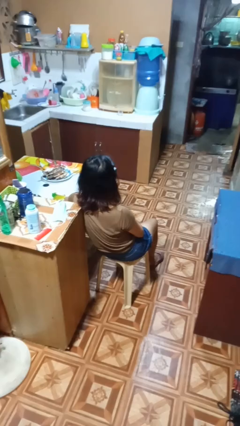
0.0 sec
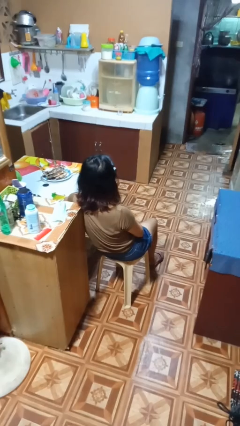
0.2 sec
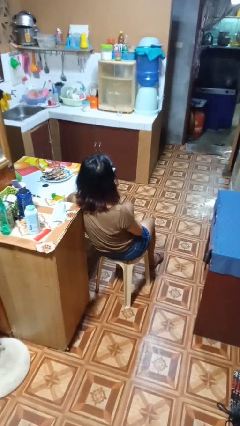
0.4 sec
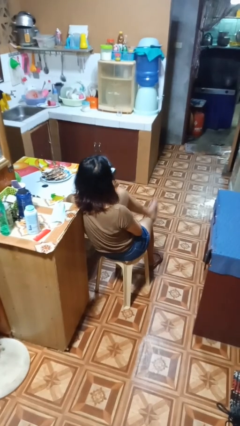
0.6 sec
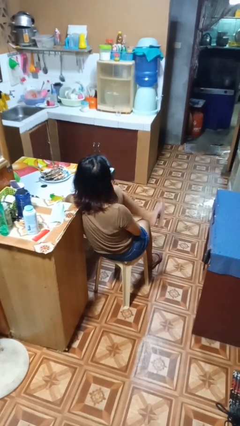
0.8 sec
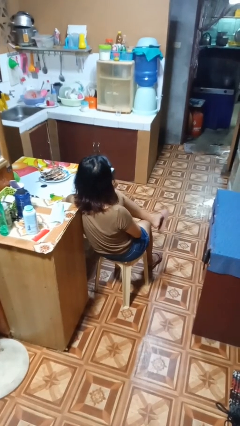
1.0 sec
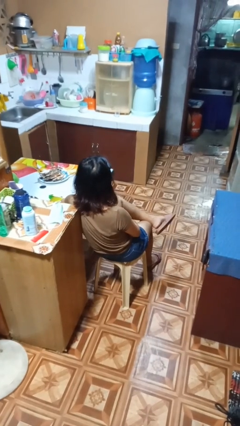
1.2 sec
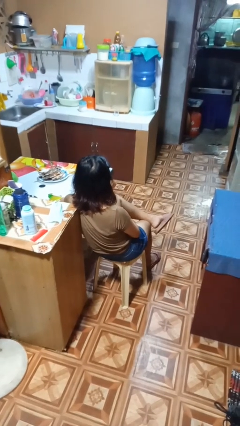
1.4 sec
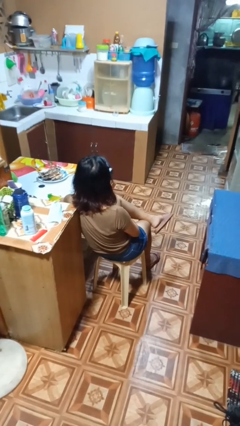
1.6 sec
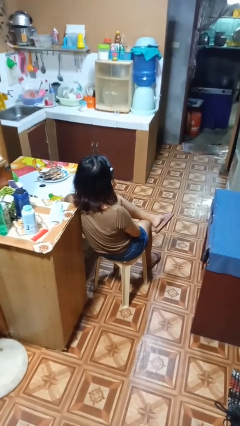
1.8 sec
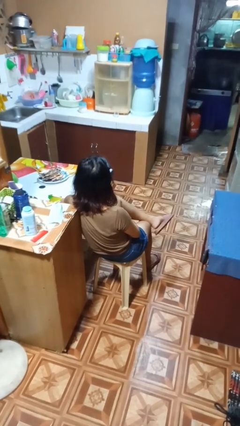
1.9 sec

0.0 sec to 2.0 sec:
person crosses legs

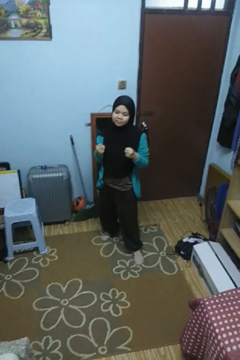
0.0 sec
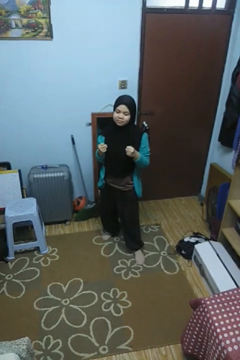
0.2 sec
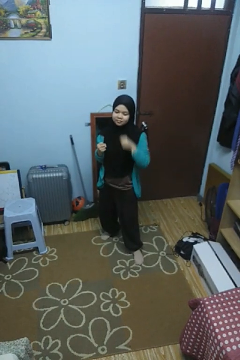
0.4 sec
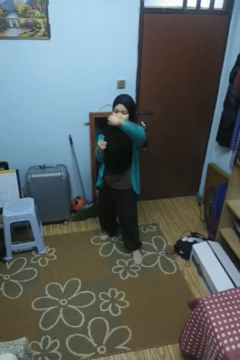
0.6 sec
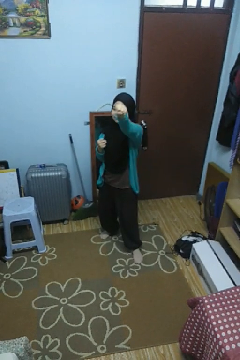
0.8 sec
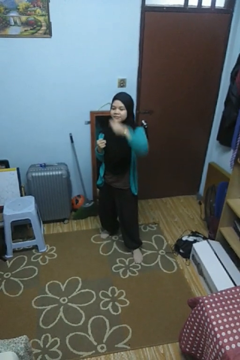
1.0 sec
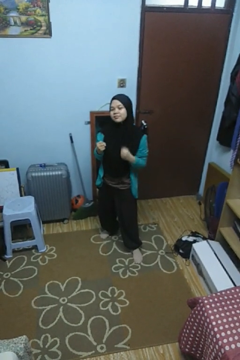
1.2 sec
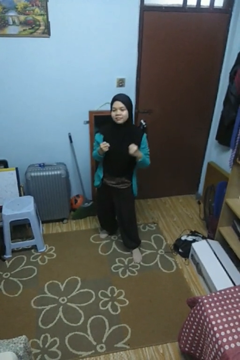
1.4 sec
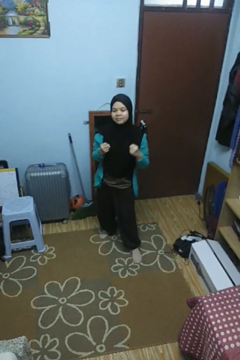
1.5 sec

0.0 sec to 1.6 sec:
person punches

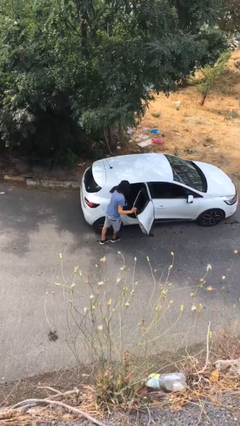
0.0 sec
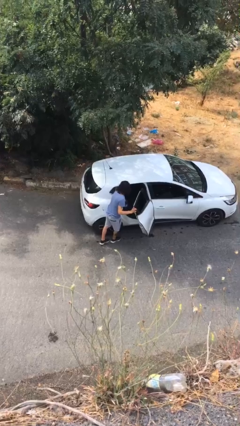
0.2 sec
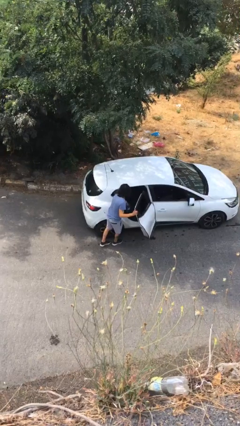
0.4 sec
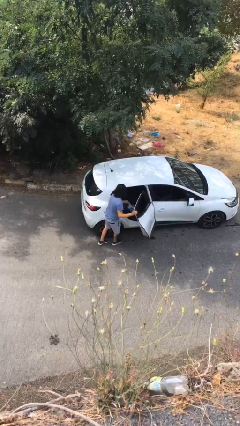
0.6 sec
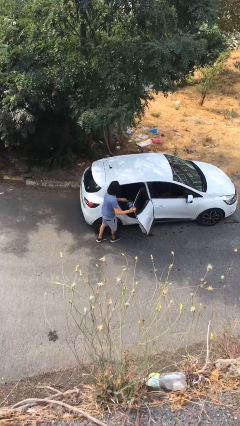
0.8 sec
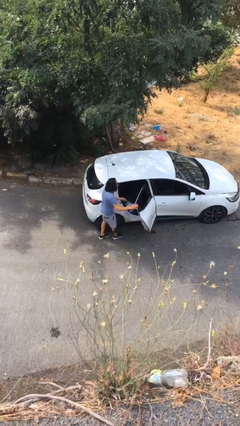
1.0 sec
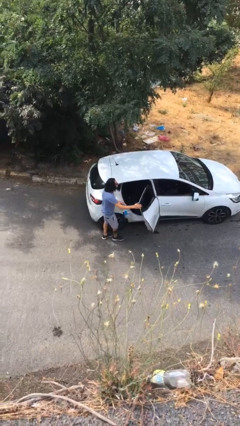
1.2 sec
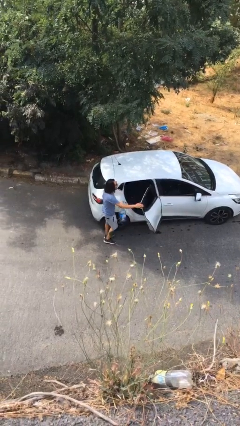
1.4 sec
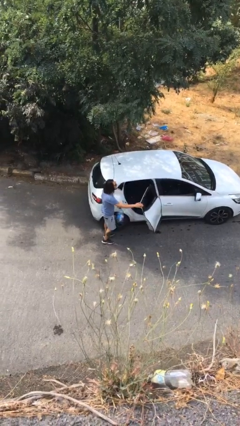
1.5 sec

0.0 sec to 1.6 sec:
person unloads car

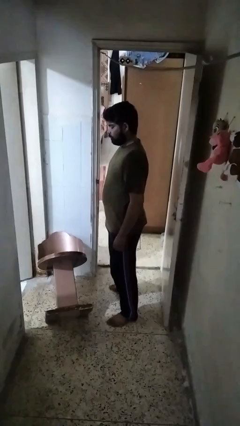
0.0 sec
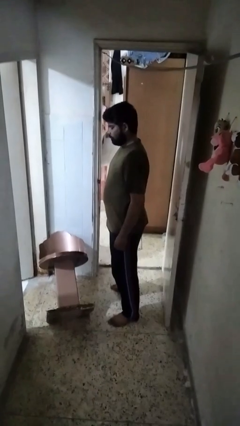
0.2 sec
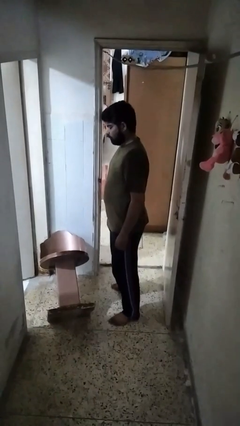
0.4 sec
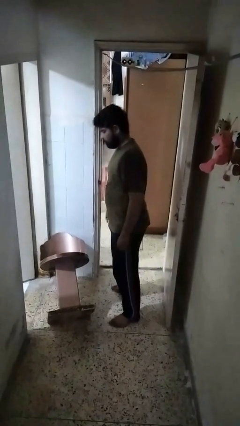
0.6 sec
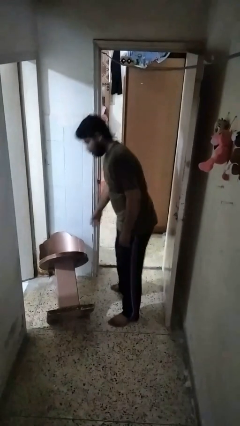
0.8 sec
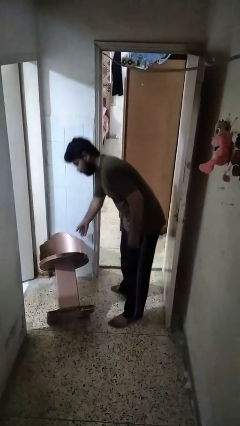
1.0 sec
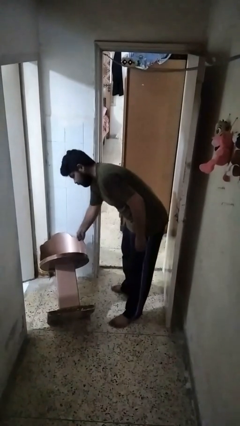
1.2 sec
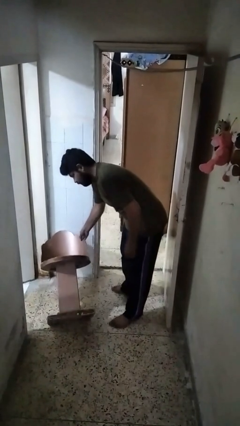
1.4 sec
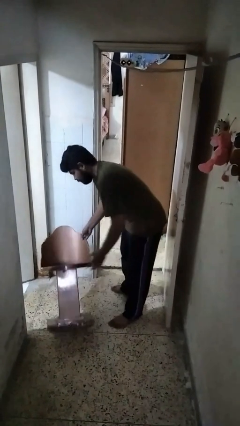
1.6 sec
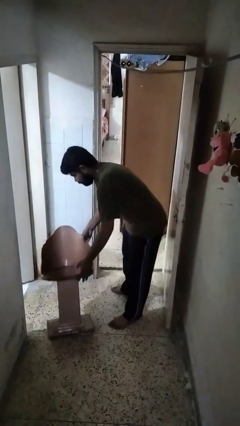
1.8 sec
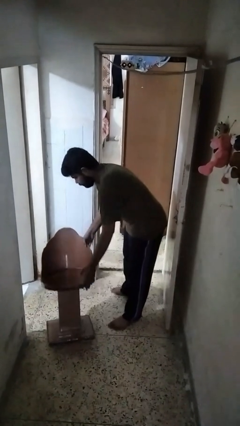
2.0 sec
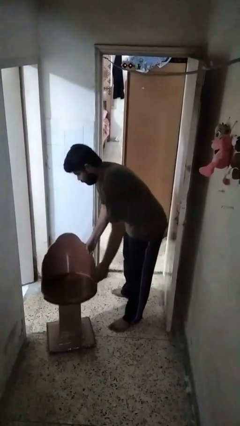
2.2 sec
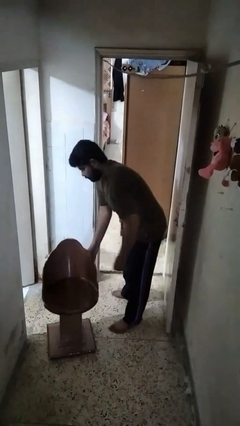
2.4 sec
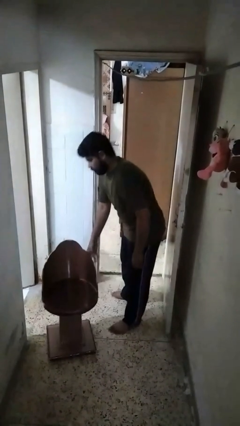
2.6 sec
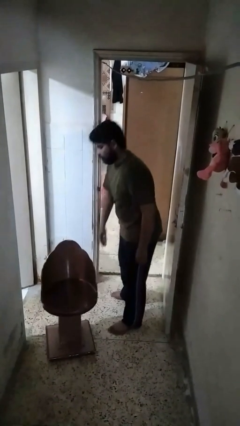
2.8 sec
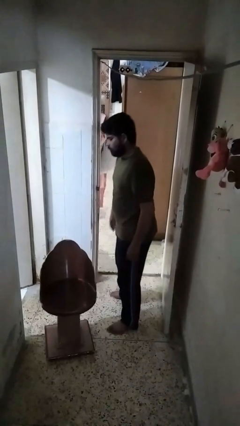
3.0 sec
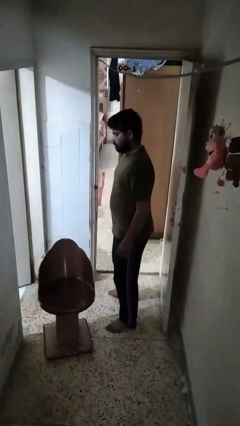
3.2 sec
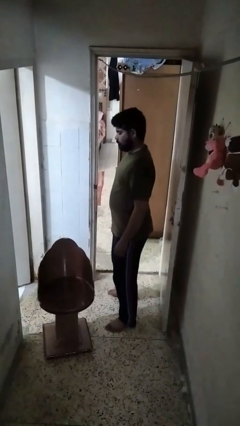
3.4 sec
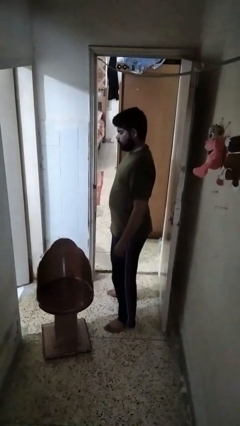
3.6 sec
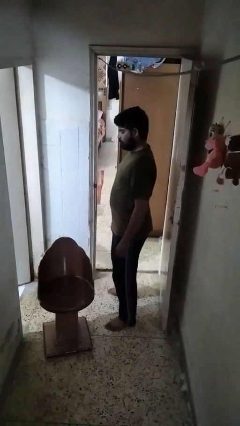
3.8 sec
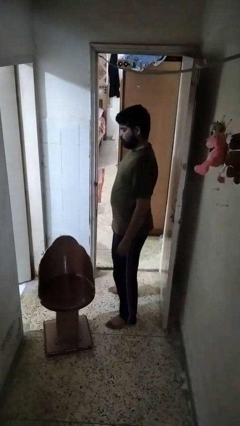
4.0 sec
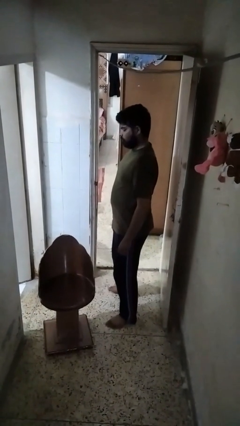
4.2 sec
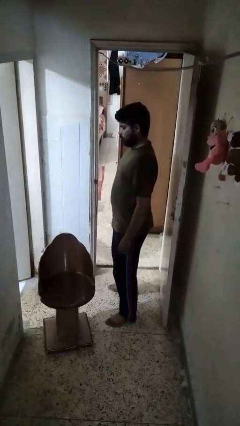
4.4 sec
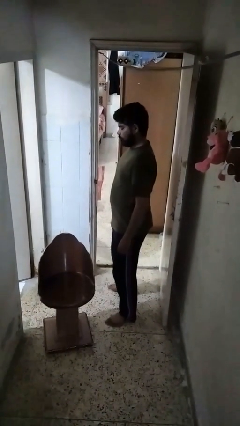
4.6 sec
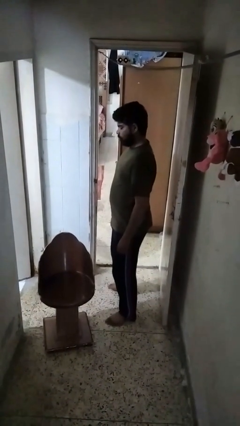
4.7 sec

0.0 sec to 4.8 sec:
person sets upright furniture

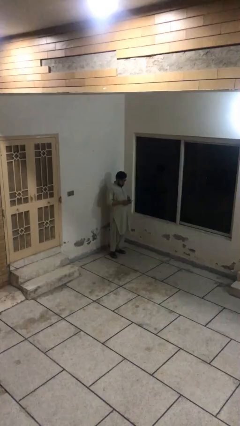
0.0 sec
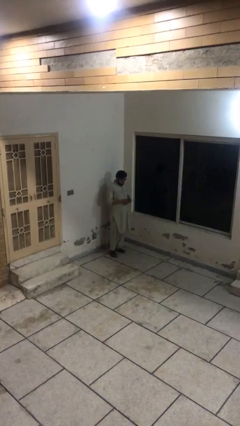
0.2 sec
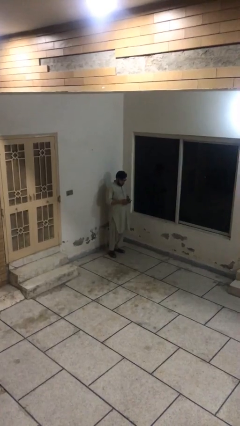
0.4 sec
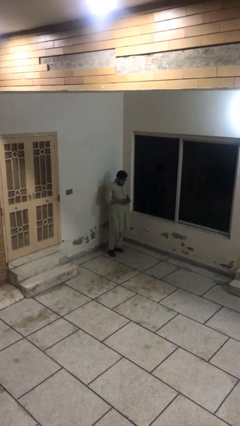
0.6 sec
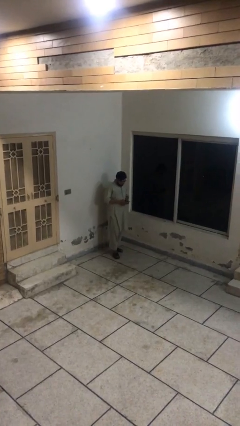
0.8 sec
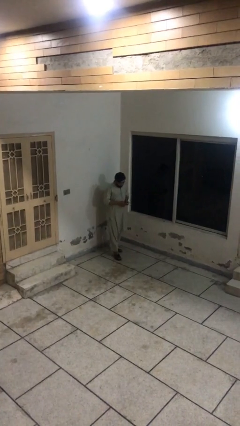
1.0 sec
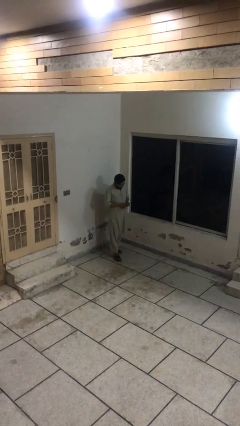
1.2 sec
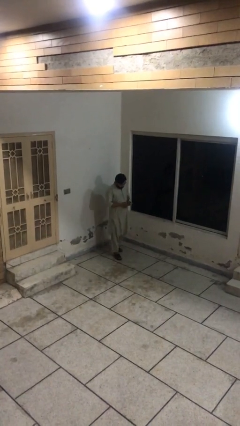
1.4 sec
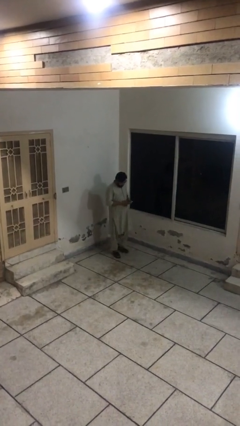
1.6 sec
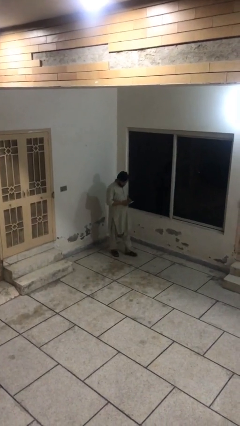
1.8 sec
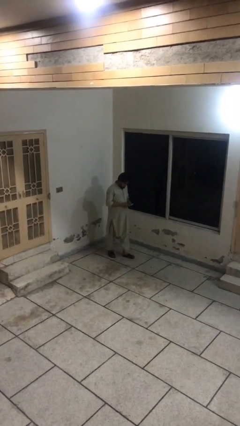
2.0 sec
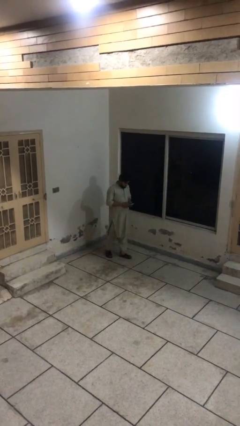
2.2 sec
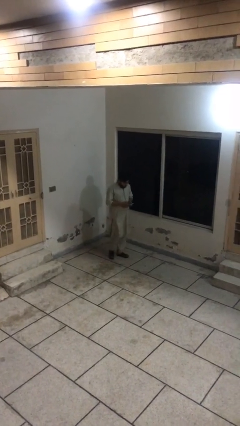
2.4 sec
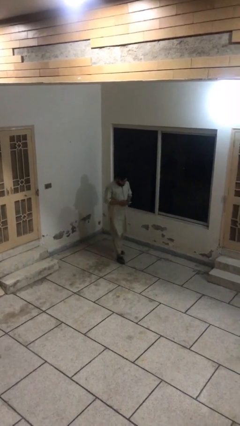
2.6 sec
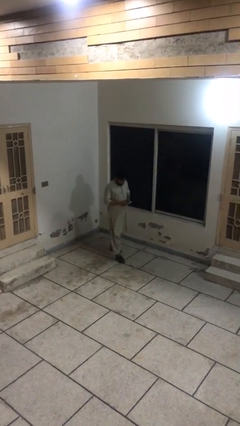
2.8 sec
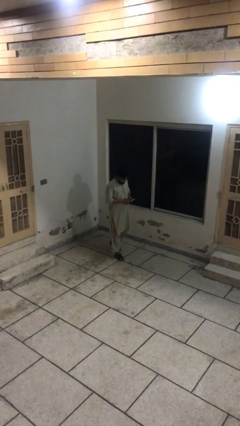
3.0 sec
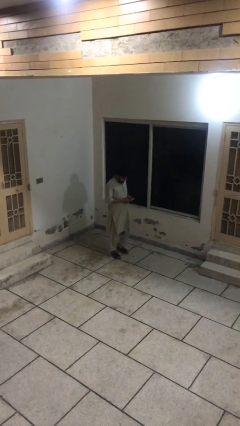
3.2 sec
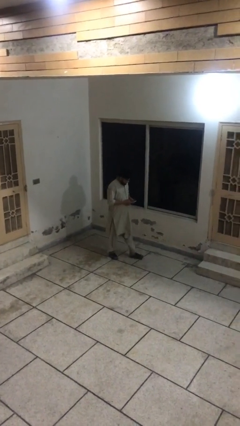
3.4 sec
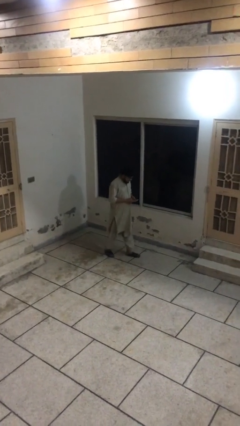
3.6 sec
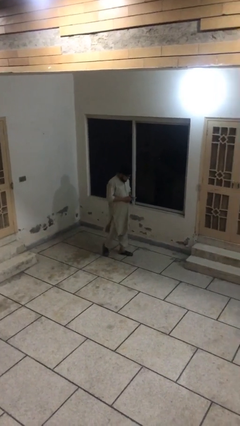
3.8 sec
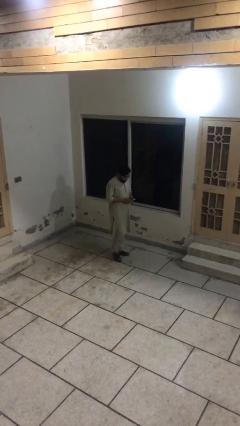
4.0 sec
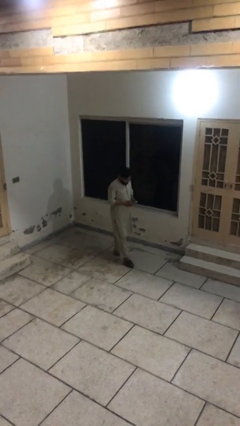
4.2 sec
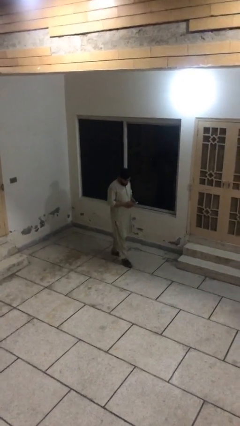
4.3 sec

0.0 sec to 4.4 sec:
person texts on phone

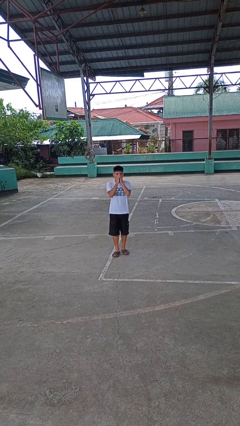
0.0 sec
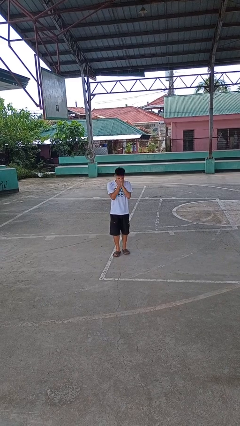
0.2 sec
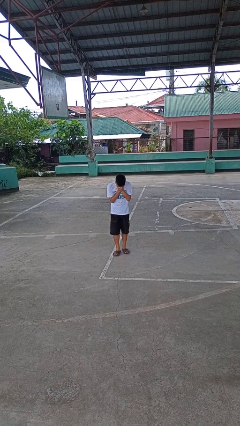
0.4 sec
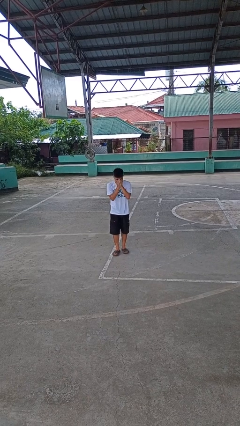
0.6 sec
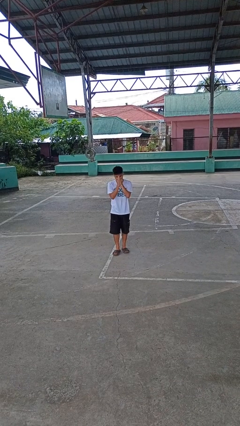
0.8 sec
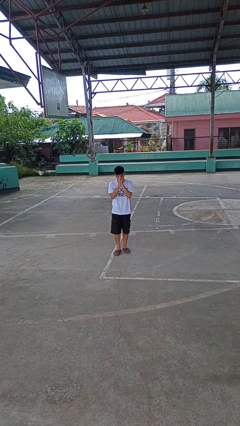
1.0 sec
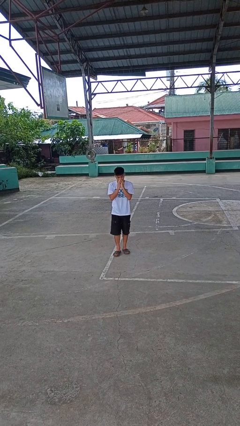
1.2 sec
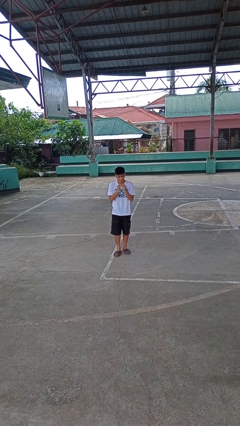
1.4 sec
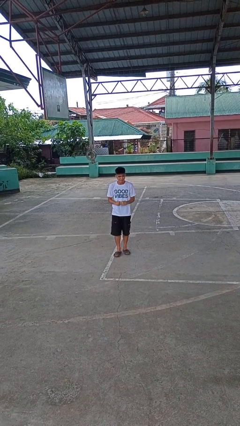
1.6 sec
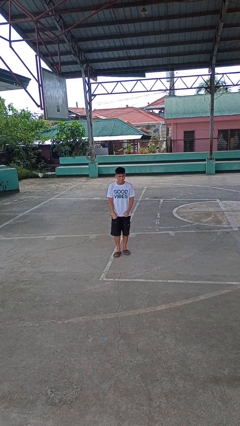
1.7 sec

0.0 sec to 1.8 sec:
person sneezes into hand

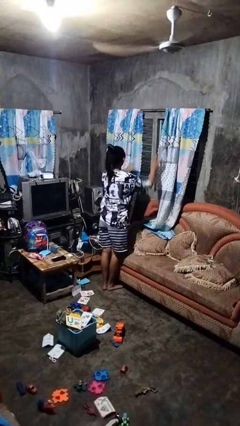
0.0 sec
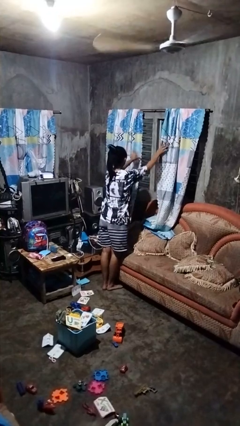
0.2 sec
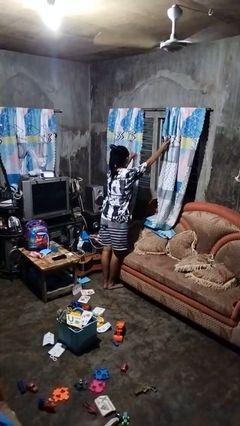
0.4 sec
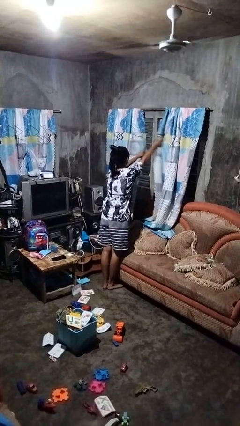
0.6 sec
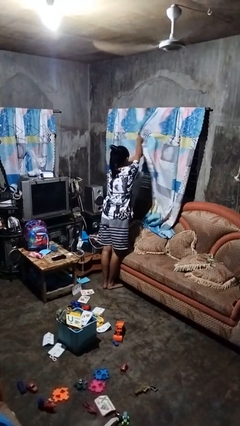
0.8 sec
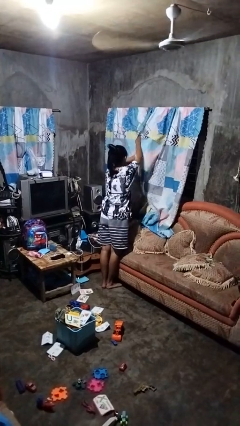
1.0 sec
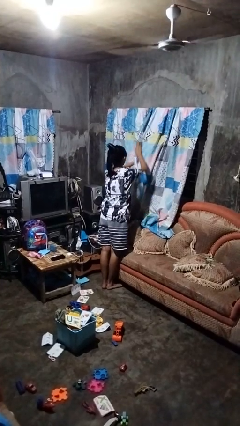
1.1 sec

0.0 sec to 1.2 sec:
person closes curtains
